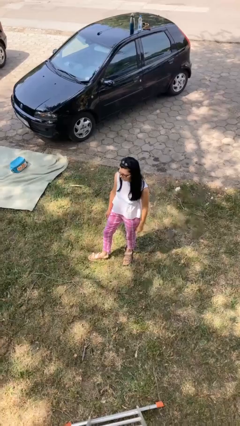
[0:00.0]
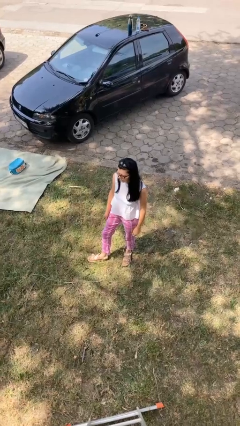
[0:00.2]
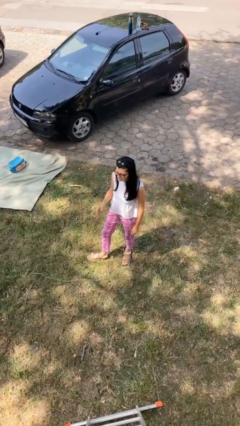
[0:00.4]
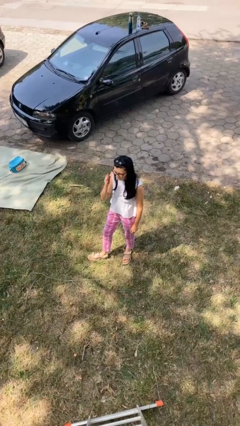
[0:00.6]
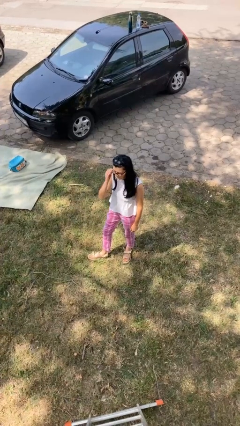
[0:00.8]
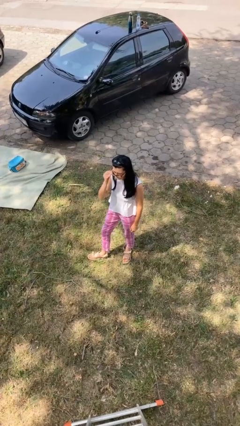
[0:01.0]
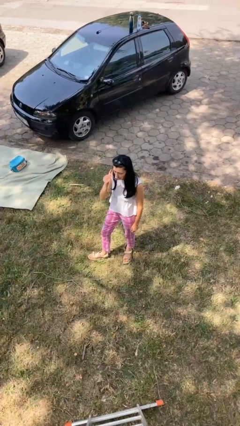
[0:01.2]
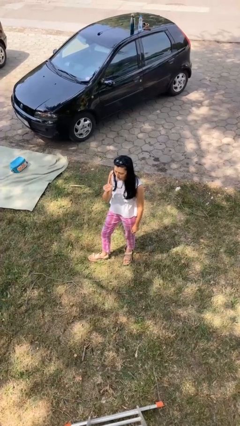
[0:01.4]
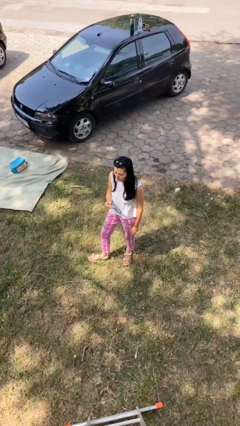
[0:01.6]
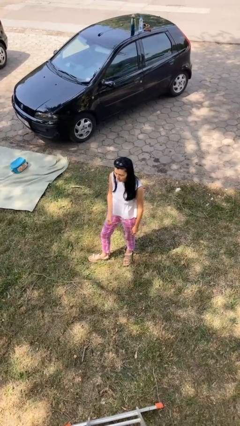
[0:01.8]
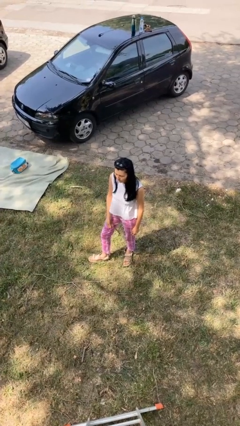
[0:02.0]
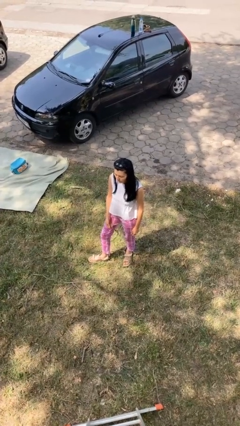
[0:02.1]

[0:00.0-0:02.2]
person takes off glasses

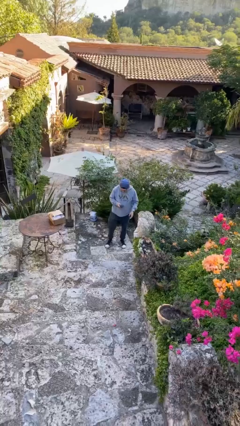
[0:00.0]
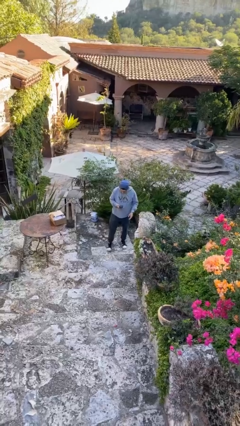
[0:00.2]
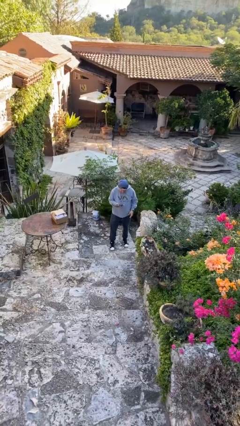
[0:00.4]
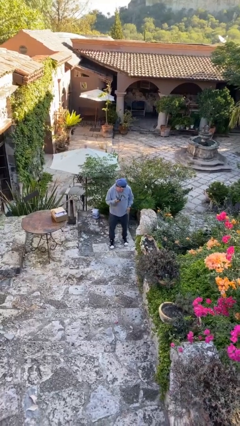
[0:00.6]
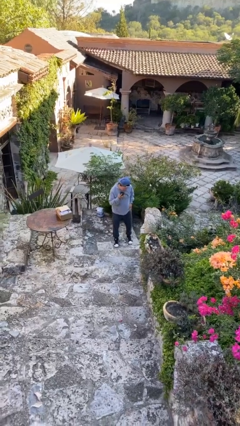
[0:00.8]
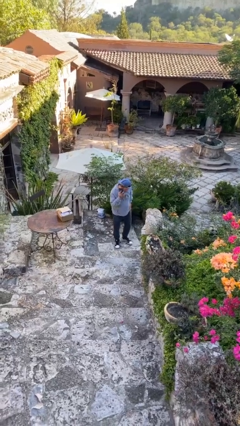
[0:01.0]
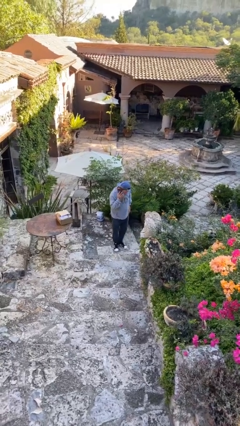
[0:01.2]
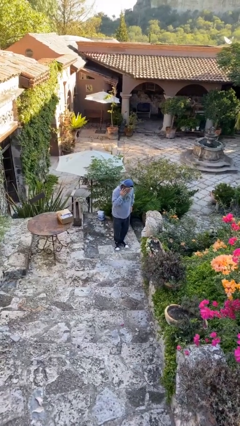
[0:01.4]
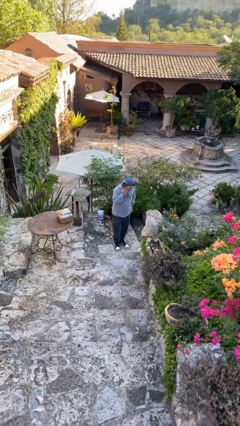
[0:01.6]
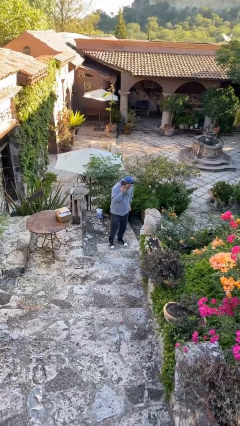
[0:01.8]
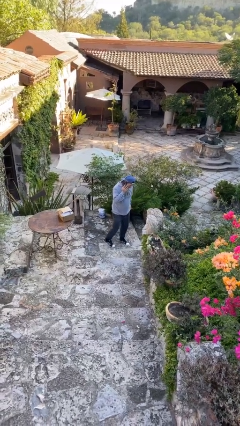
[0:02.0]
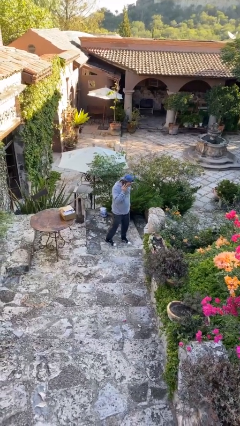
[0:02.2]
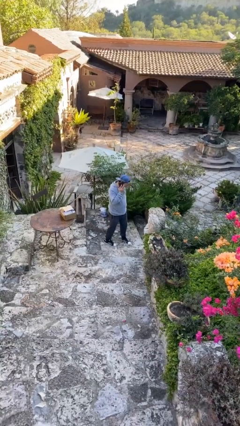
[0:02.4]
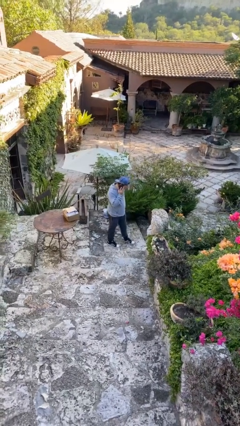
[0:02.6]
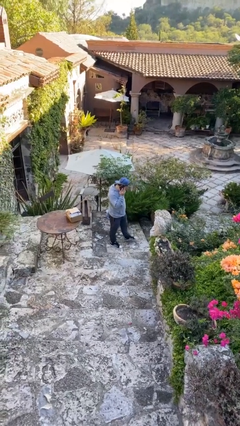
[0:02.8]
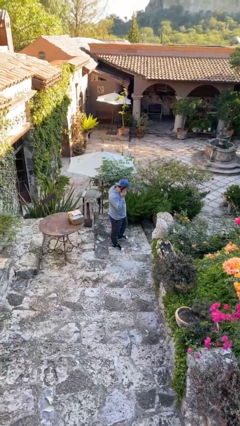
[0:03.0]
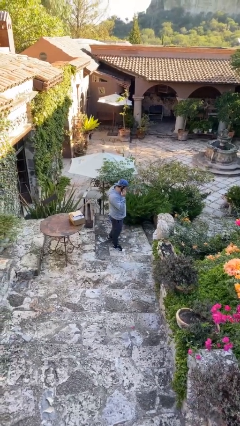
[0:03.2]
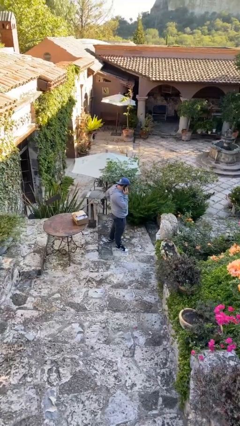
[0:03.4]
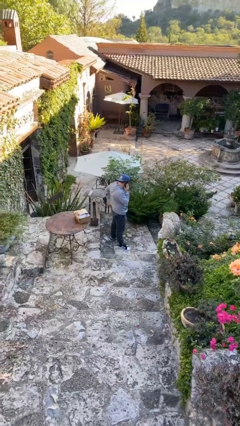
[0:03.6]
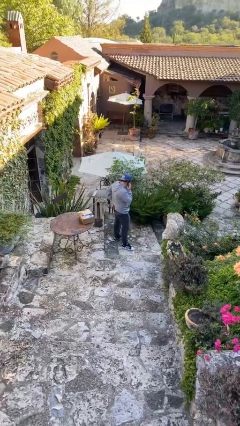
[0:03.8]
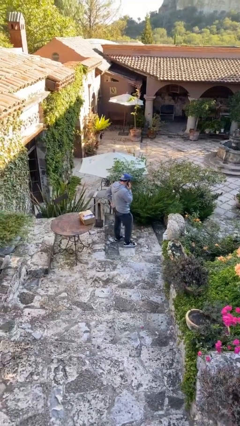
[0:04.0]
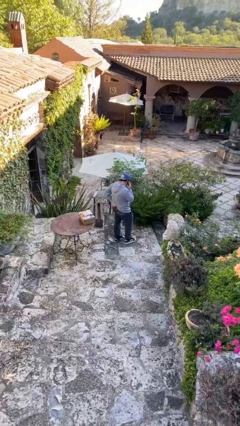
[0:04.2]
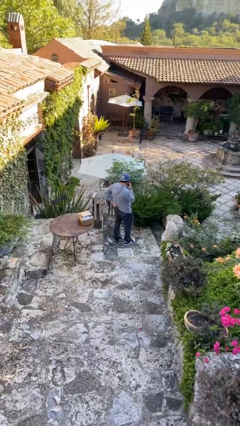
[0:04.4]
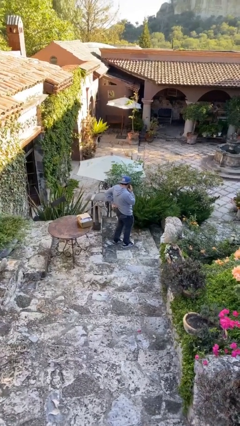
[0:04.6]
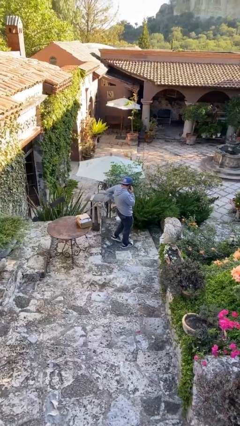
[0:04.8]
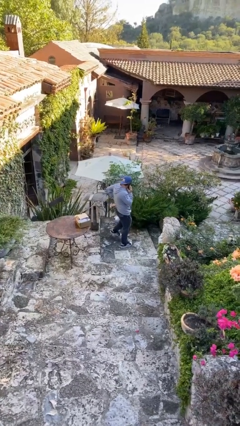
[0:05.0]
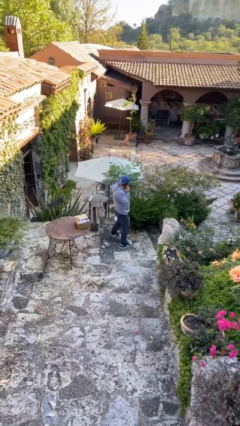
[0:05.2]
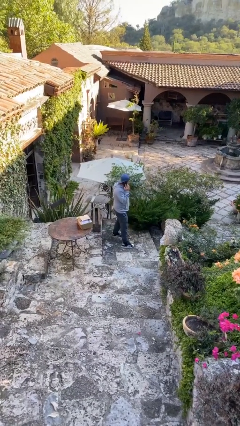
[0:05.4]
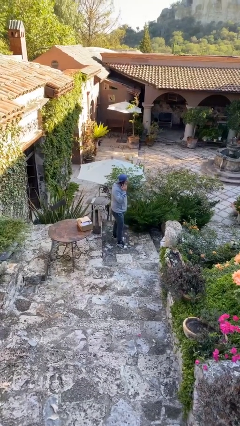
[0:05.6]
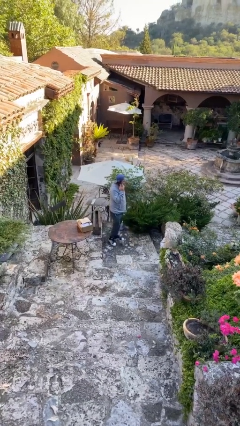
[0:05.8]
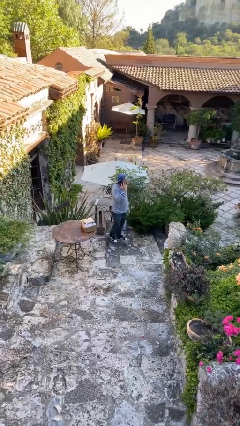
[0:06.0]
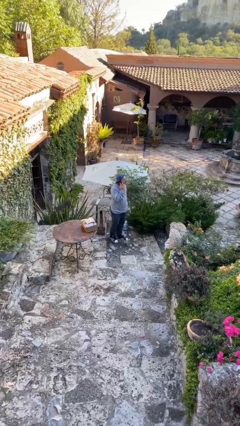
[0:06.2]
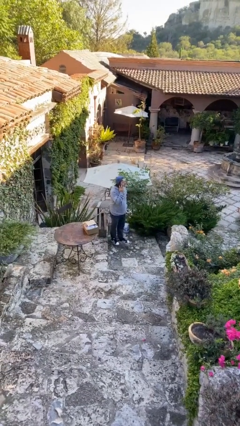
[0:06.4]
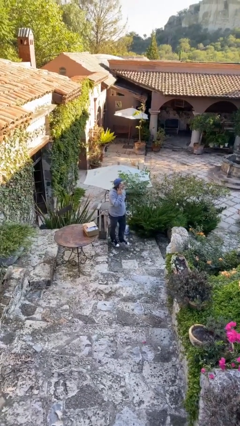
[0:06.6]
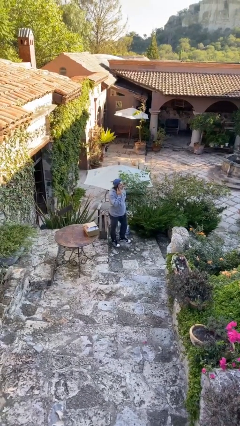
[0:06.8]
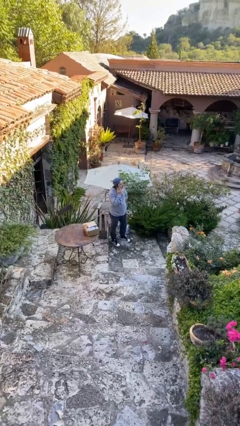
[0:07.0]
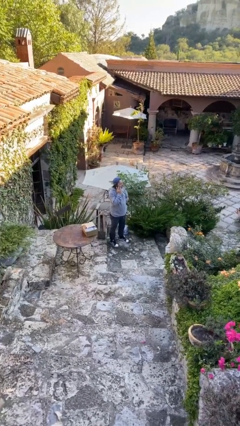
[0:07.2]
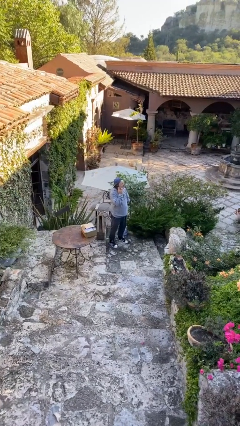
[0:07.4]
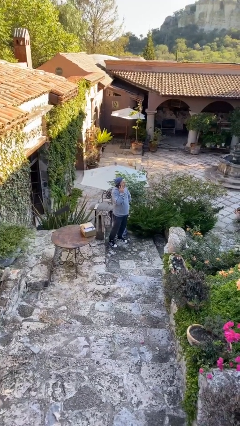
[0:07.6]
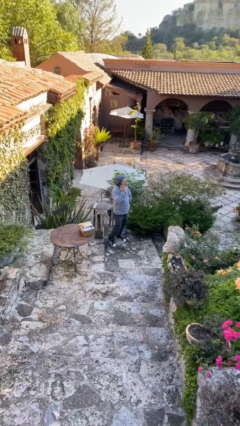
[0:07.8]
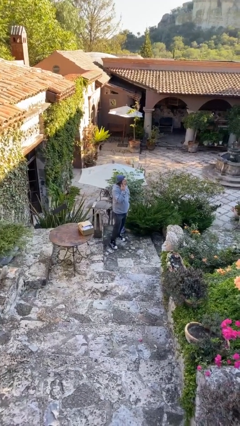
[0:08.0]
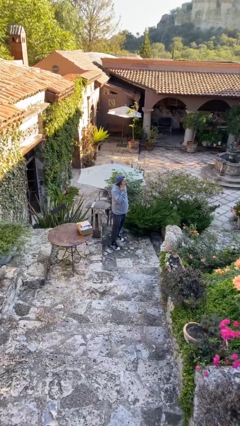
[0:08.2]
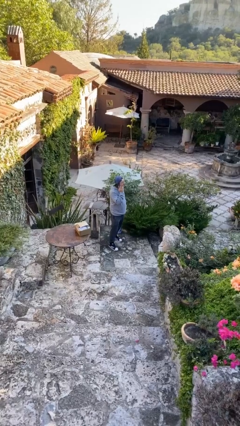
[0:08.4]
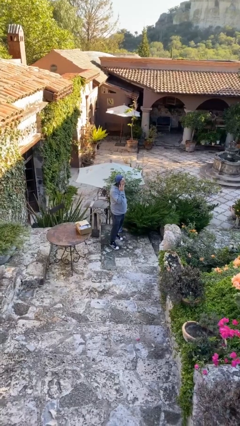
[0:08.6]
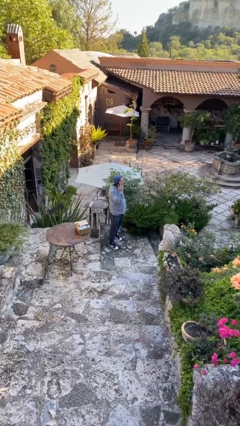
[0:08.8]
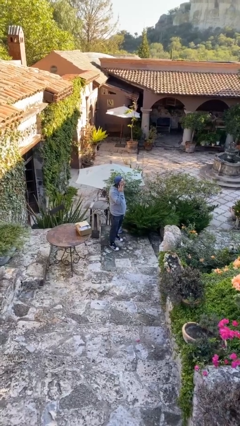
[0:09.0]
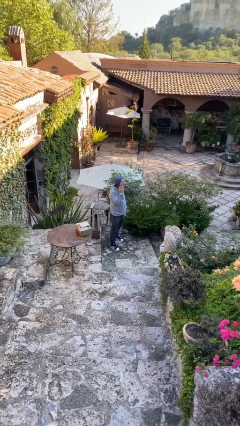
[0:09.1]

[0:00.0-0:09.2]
person talks on phone

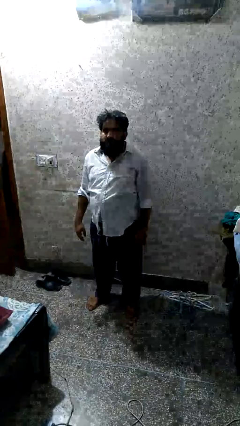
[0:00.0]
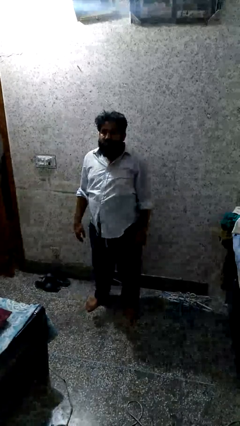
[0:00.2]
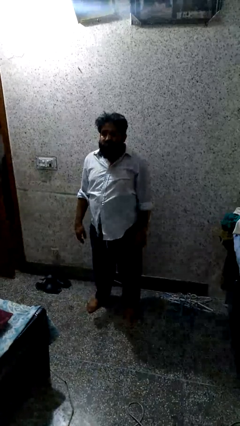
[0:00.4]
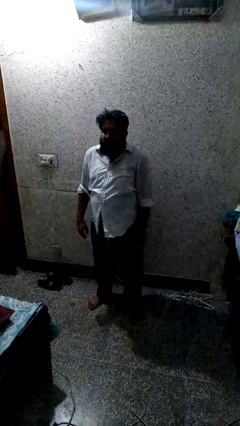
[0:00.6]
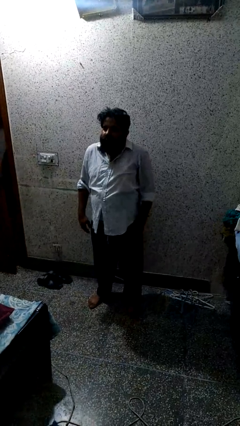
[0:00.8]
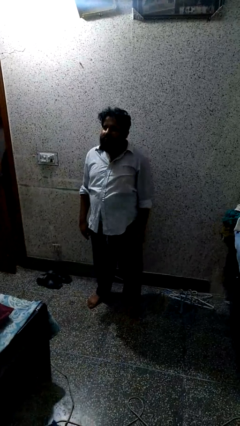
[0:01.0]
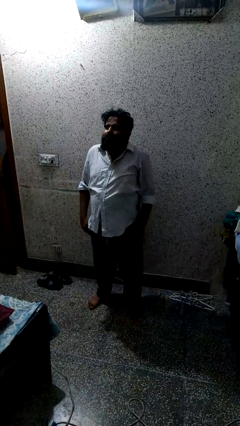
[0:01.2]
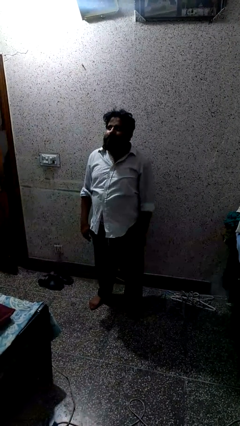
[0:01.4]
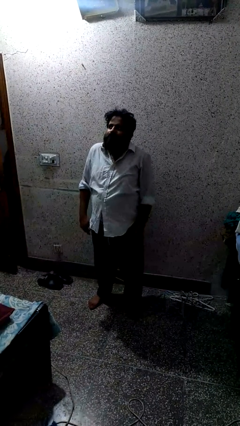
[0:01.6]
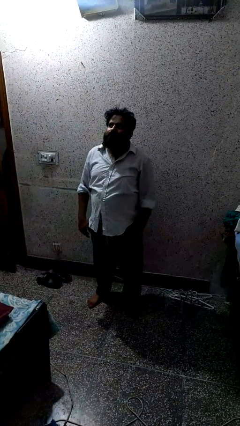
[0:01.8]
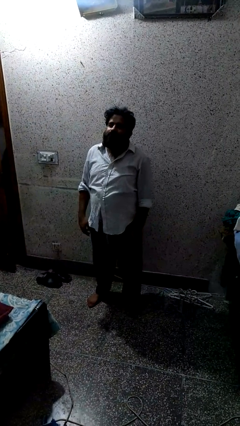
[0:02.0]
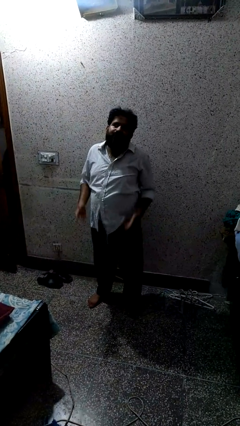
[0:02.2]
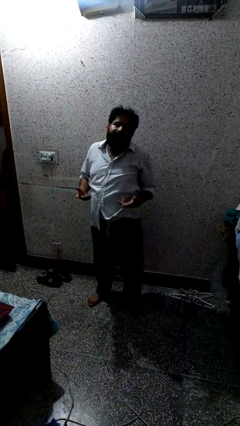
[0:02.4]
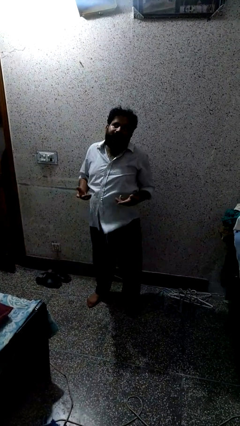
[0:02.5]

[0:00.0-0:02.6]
person shrugs

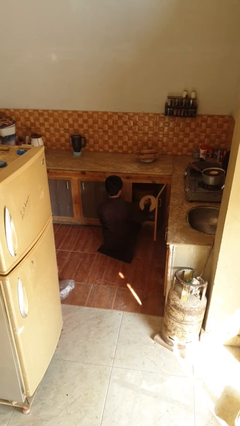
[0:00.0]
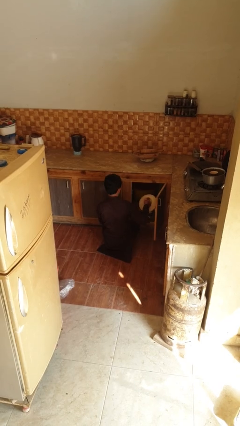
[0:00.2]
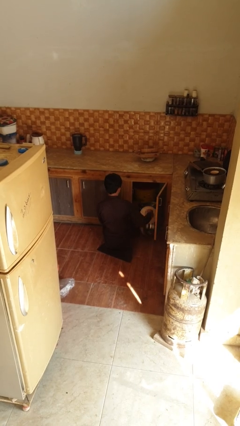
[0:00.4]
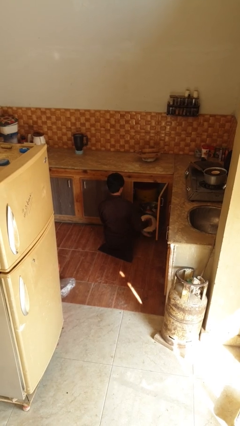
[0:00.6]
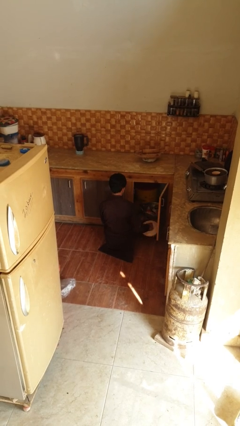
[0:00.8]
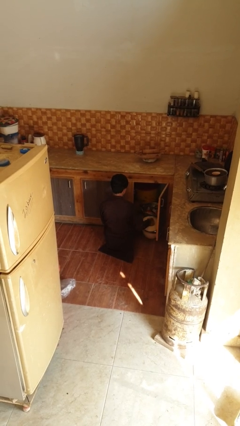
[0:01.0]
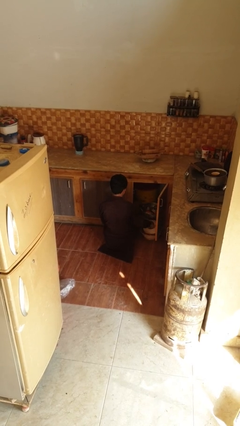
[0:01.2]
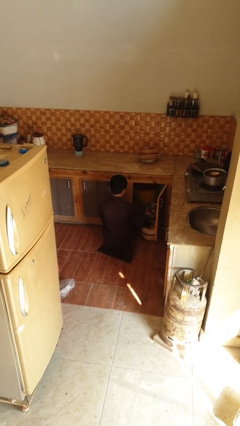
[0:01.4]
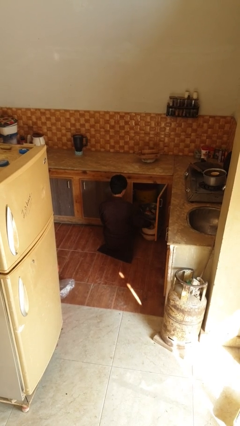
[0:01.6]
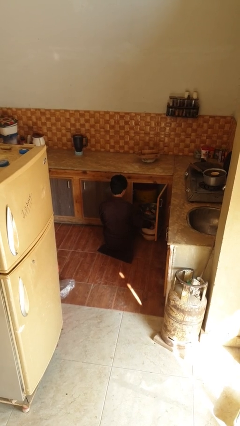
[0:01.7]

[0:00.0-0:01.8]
person takes object from kitchen drawer

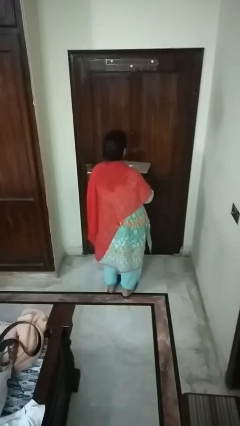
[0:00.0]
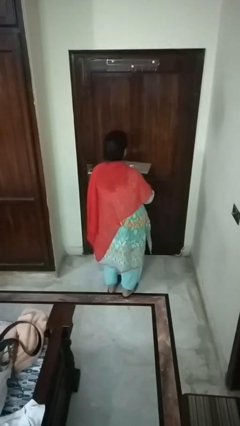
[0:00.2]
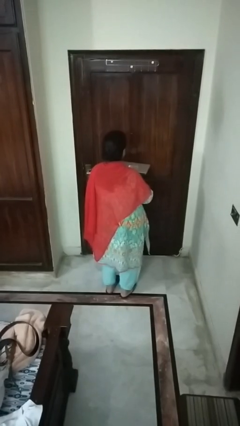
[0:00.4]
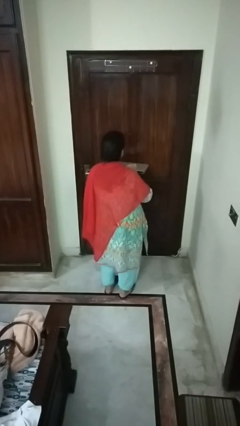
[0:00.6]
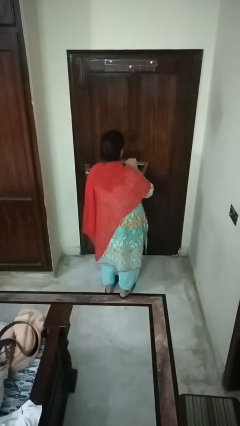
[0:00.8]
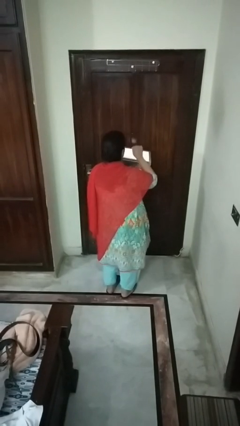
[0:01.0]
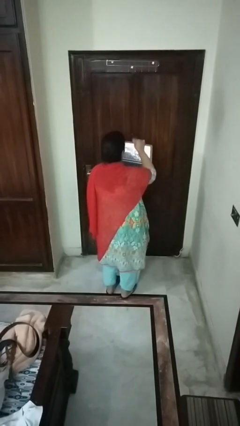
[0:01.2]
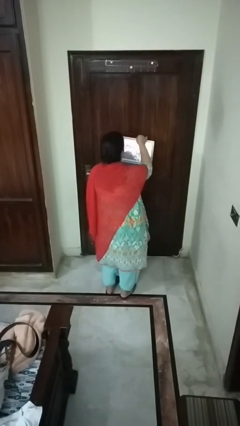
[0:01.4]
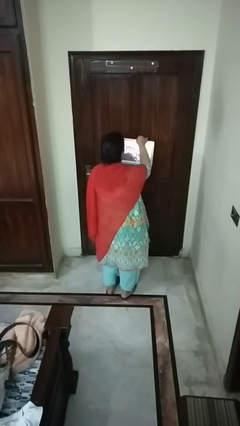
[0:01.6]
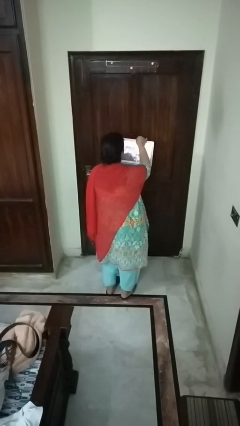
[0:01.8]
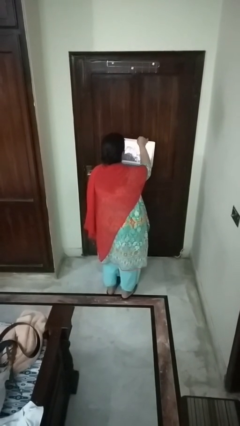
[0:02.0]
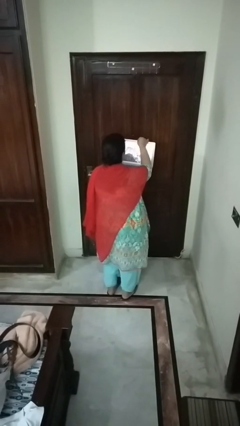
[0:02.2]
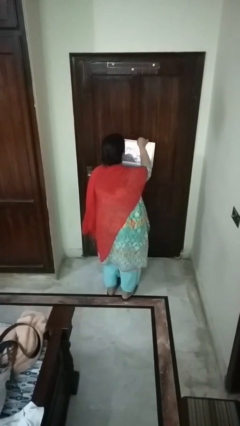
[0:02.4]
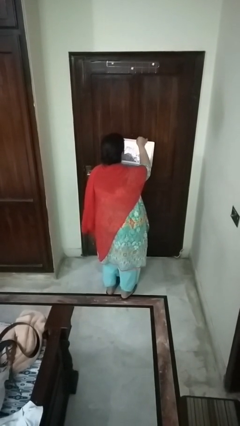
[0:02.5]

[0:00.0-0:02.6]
person opens laptop
